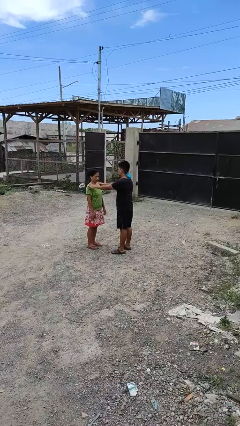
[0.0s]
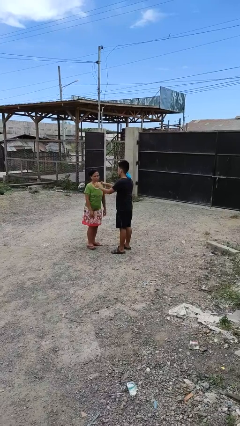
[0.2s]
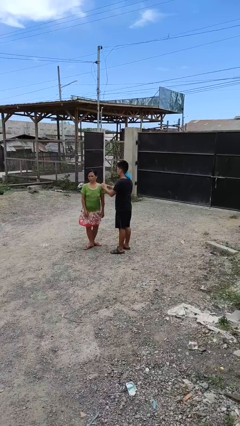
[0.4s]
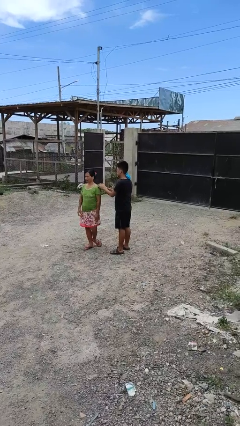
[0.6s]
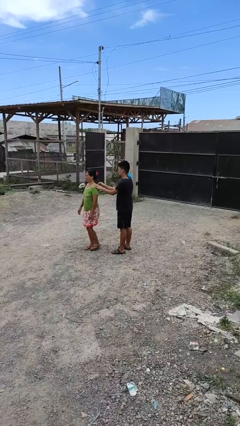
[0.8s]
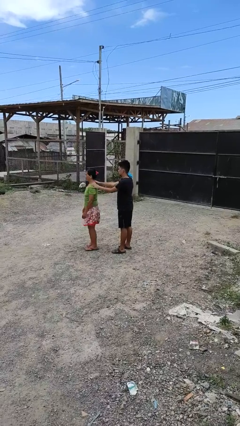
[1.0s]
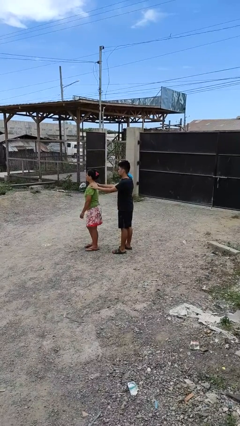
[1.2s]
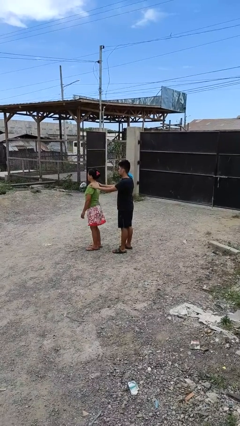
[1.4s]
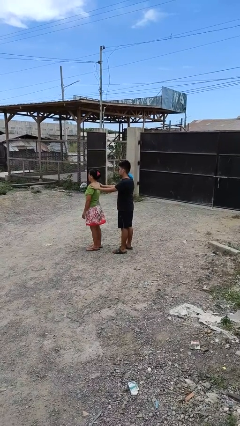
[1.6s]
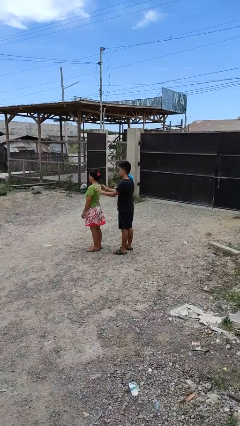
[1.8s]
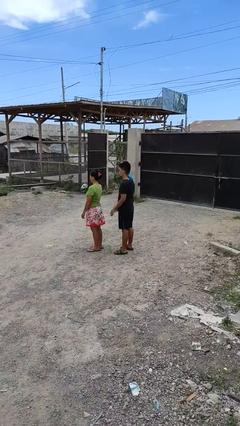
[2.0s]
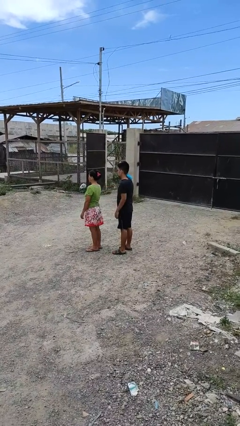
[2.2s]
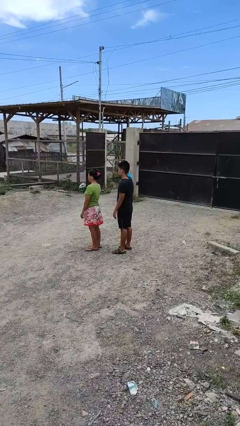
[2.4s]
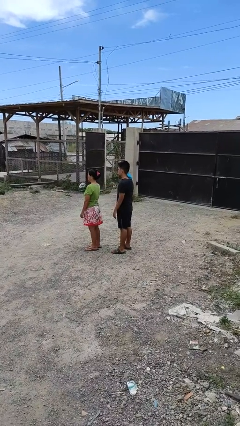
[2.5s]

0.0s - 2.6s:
person spins person around

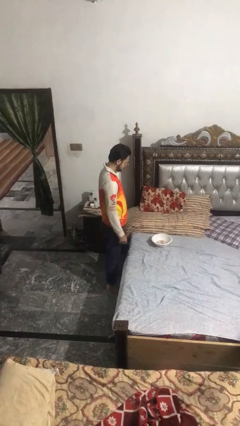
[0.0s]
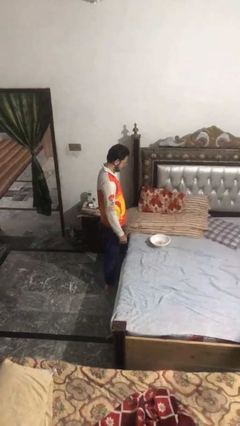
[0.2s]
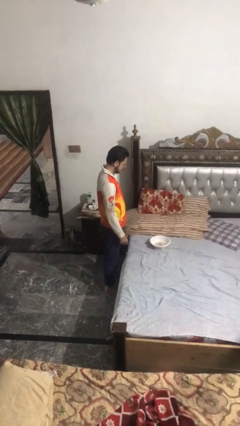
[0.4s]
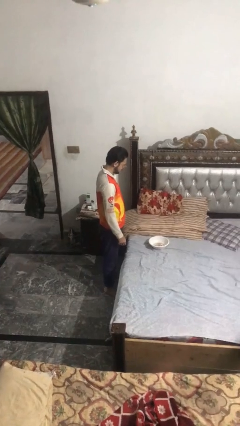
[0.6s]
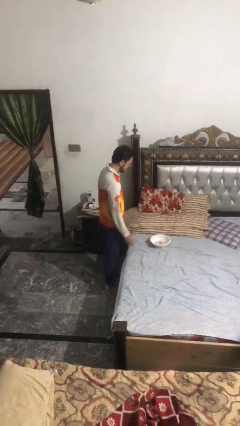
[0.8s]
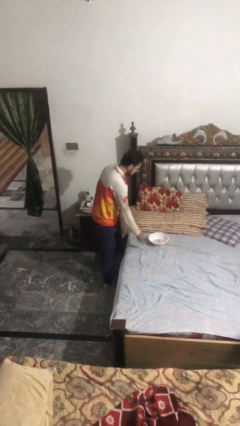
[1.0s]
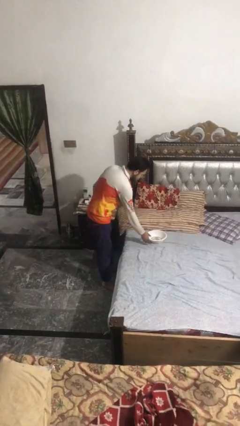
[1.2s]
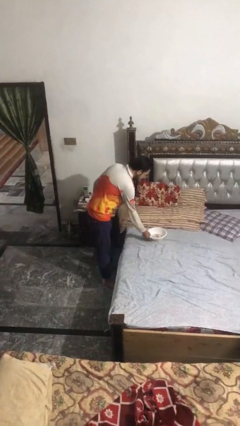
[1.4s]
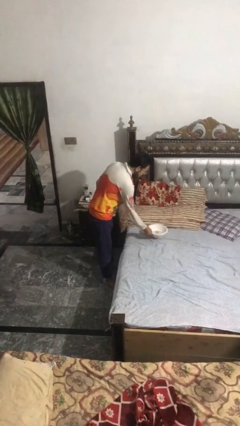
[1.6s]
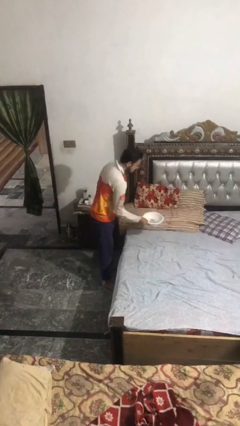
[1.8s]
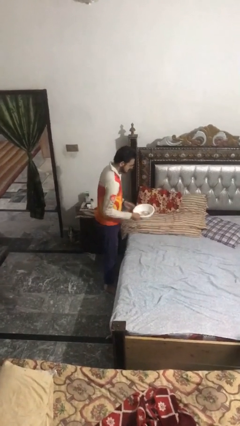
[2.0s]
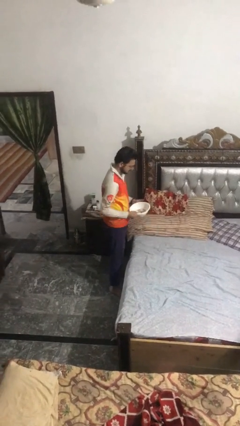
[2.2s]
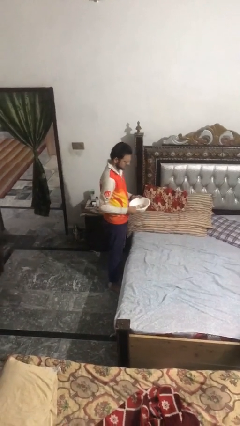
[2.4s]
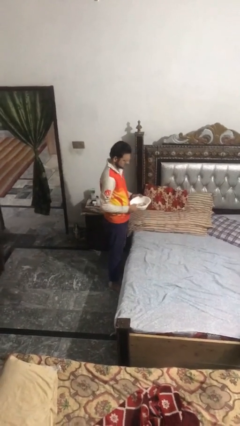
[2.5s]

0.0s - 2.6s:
person picks up object from countertop

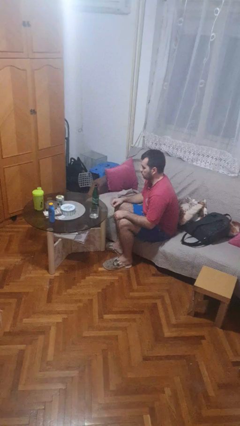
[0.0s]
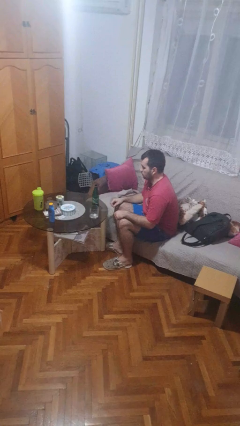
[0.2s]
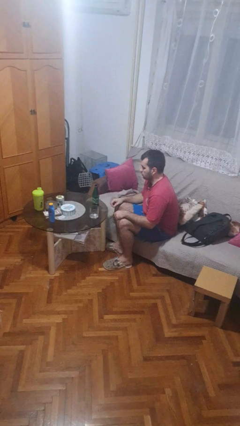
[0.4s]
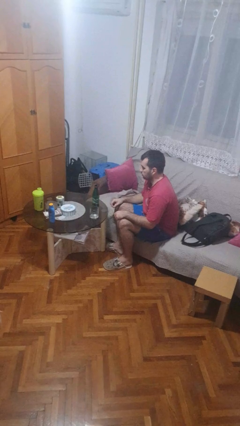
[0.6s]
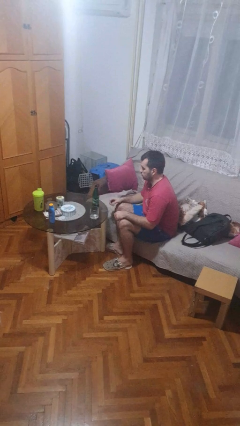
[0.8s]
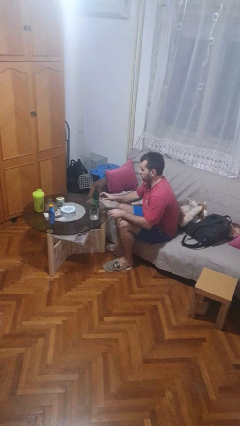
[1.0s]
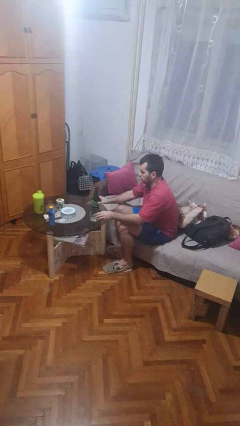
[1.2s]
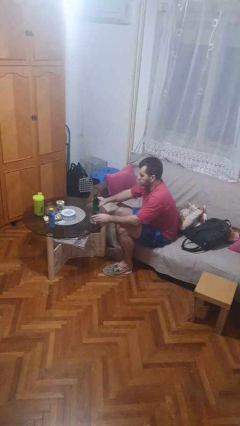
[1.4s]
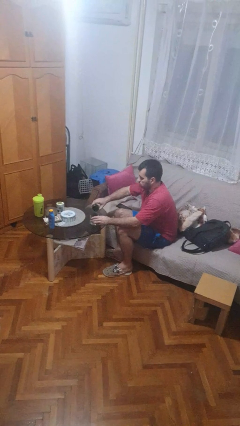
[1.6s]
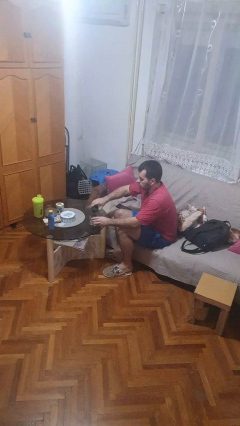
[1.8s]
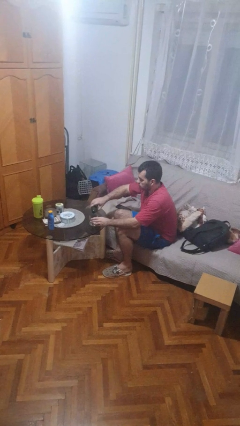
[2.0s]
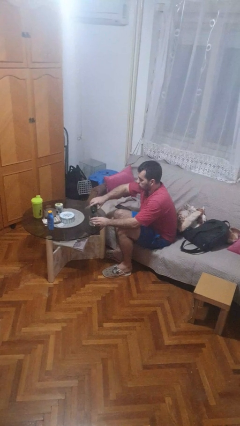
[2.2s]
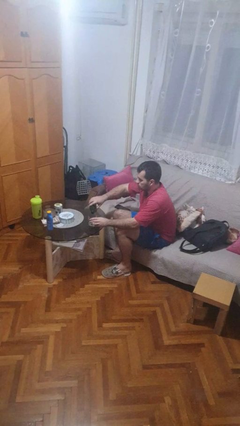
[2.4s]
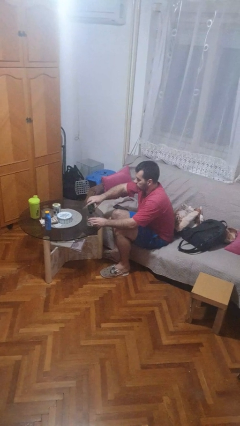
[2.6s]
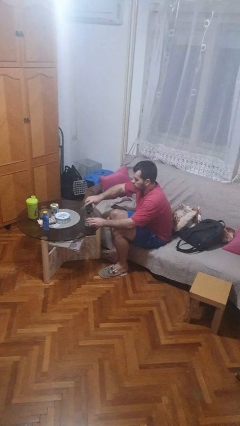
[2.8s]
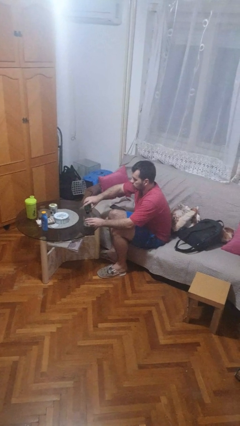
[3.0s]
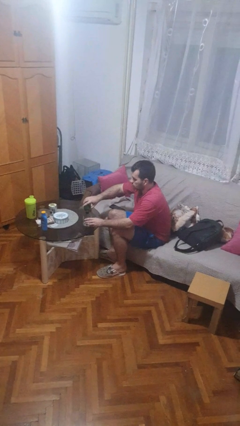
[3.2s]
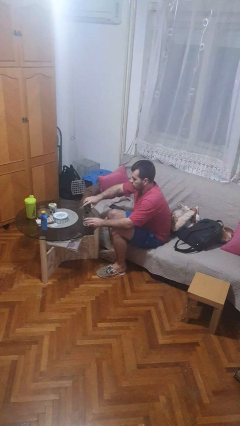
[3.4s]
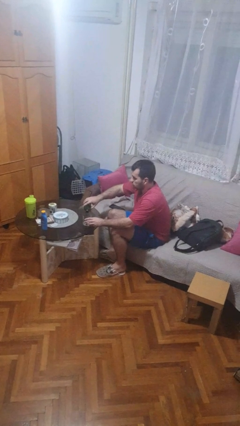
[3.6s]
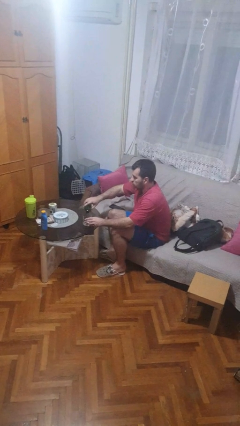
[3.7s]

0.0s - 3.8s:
person pours liquid into cup

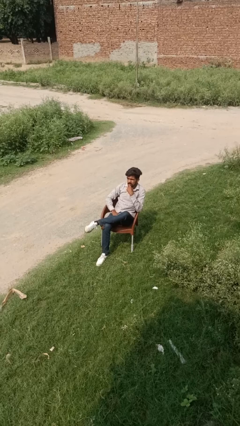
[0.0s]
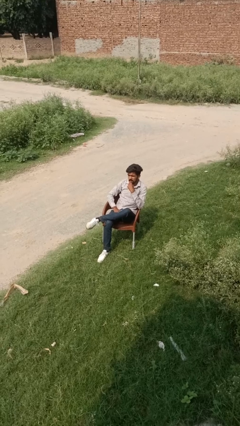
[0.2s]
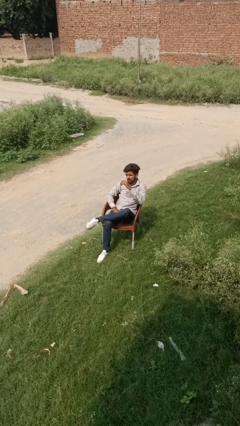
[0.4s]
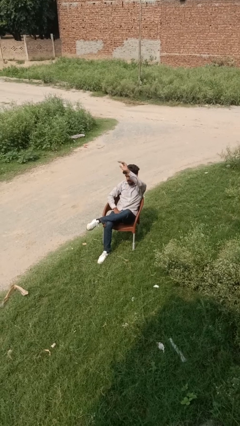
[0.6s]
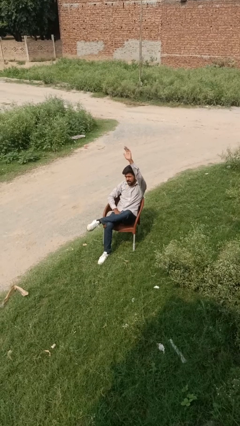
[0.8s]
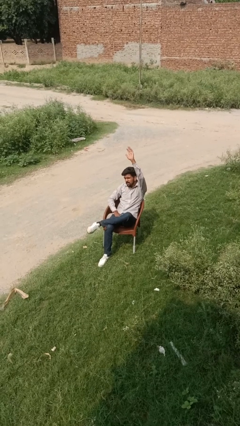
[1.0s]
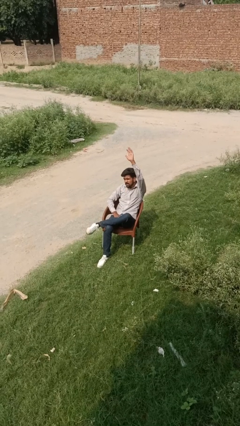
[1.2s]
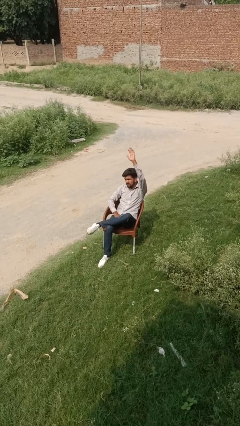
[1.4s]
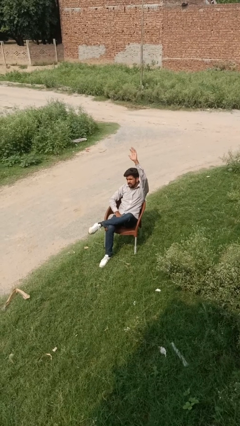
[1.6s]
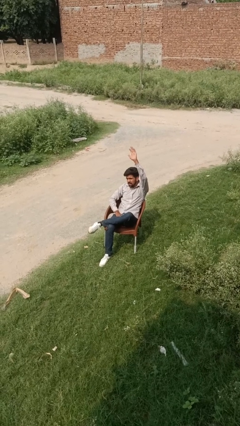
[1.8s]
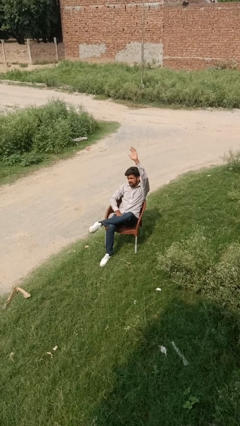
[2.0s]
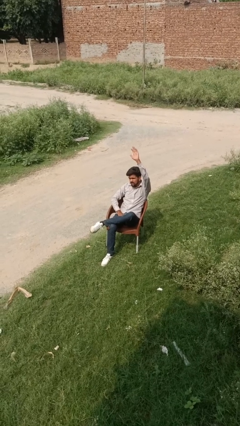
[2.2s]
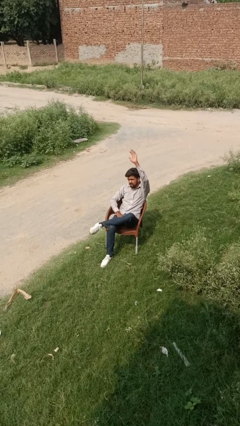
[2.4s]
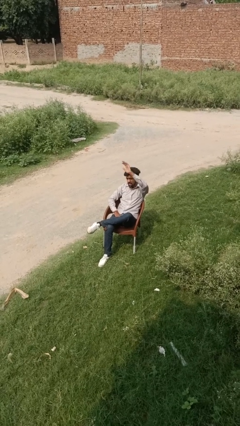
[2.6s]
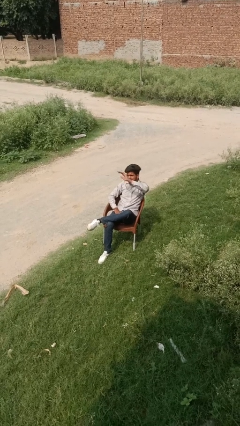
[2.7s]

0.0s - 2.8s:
person gestures raise hand

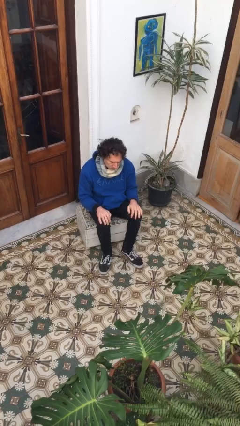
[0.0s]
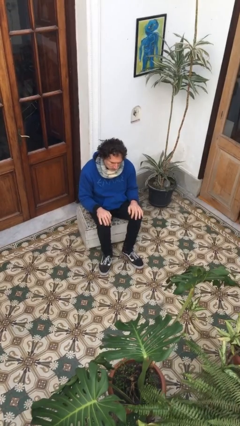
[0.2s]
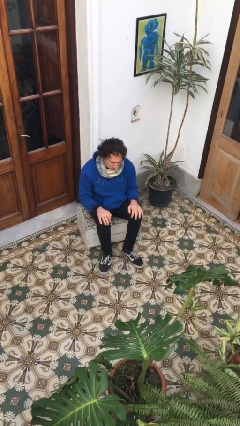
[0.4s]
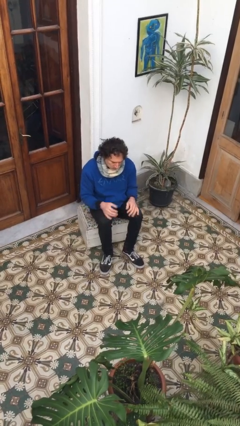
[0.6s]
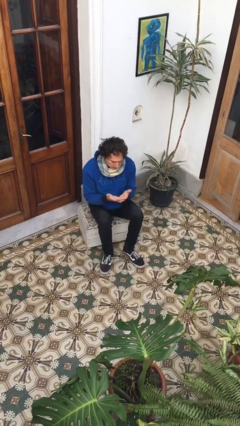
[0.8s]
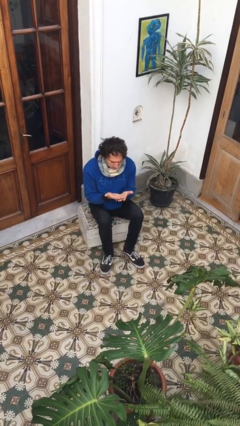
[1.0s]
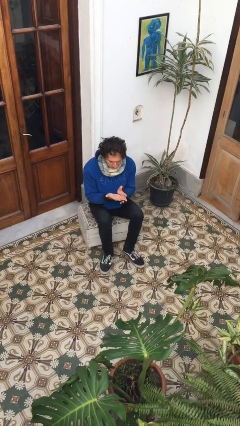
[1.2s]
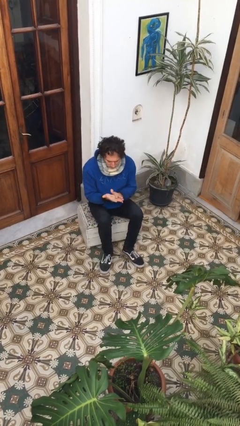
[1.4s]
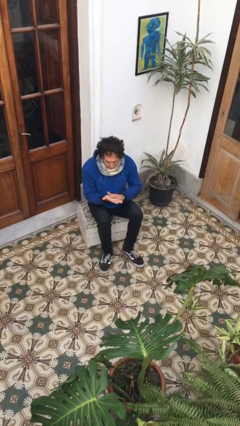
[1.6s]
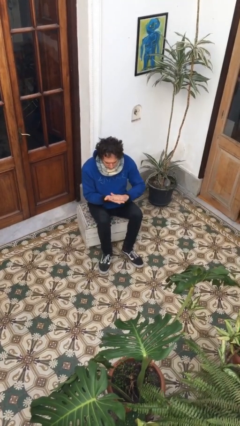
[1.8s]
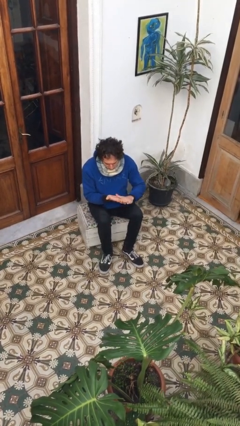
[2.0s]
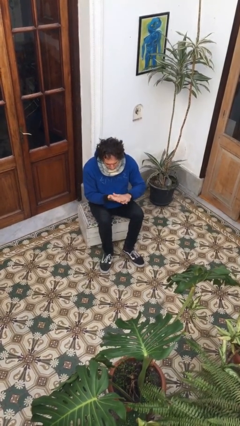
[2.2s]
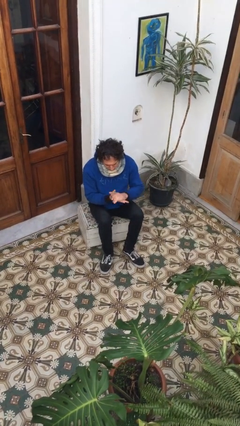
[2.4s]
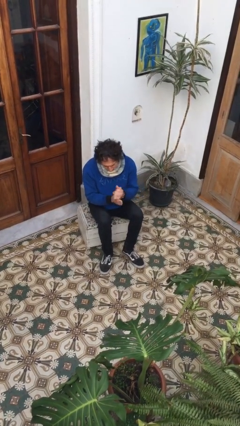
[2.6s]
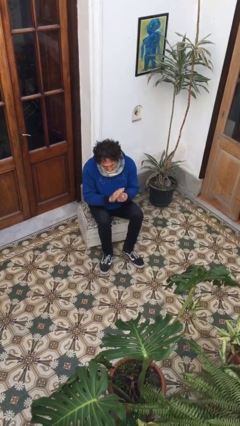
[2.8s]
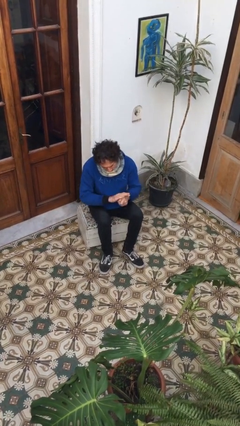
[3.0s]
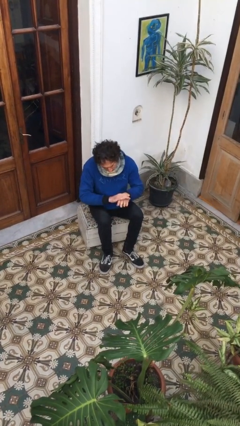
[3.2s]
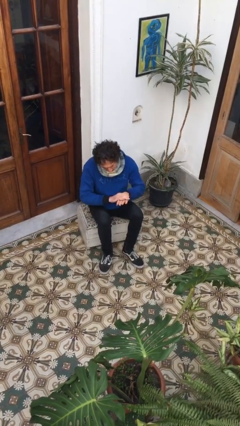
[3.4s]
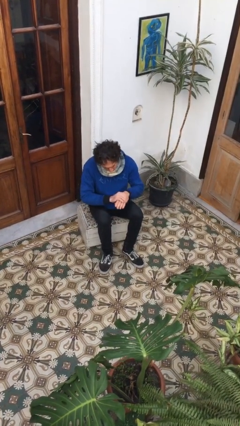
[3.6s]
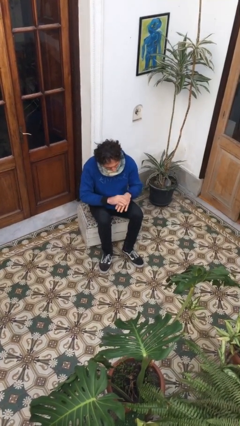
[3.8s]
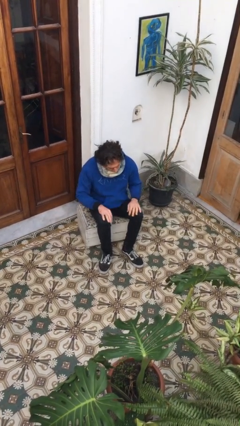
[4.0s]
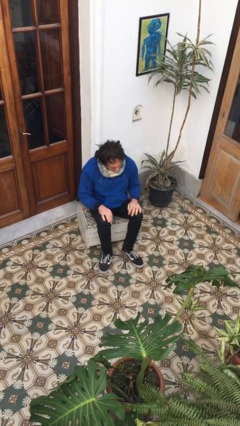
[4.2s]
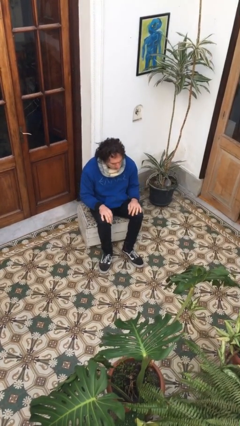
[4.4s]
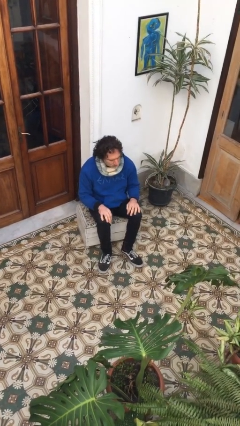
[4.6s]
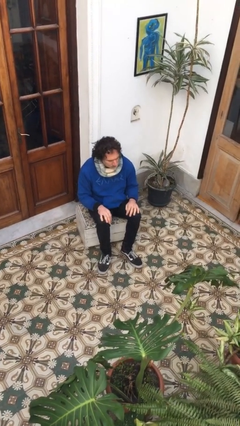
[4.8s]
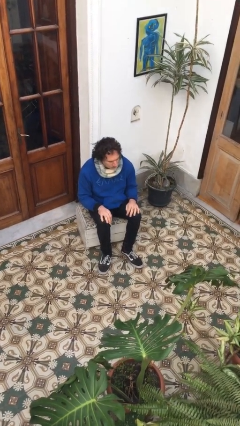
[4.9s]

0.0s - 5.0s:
person looks at hands in lap

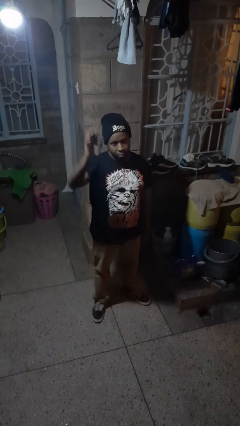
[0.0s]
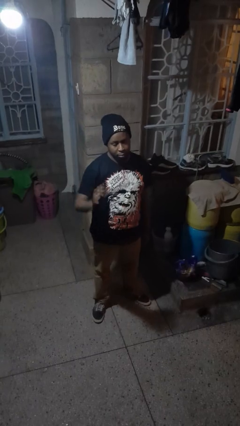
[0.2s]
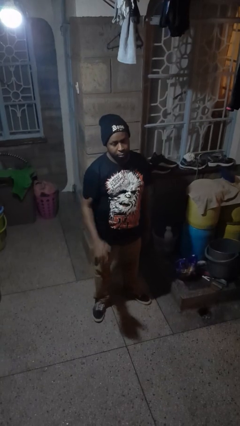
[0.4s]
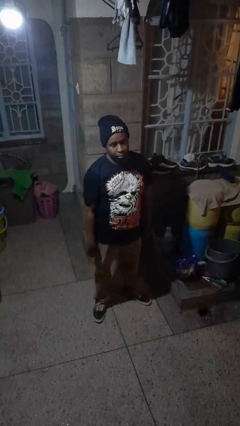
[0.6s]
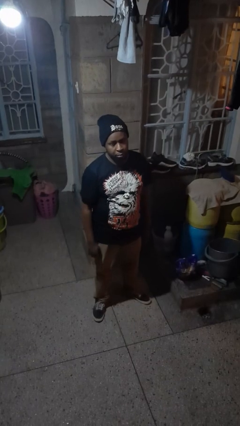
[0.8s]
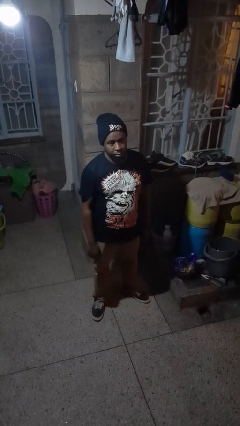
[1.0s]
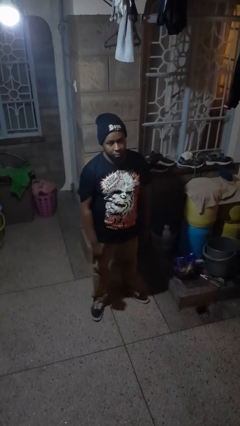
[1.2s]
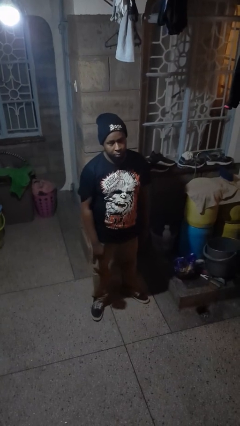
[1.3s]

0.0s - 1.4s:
person gestures lower hand
